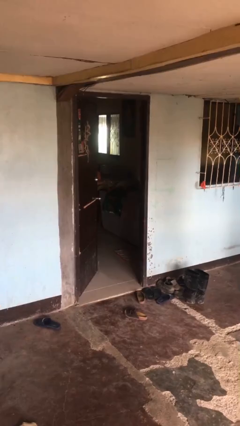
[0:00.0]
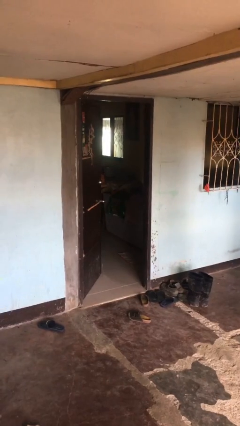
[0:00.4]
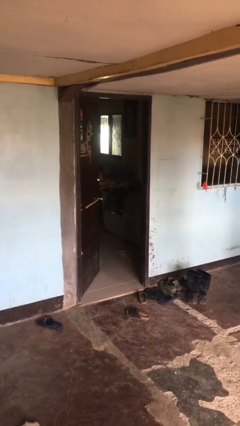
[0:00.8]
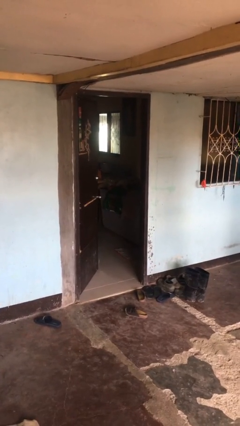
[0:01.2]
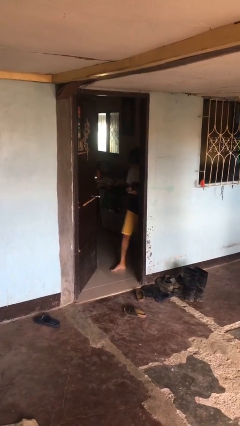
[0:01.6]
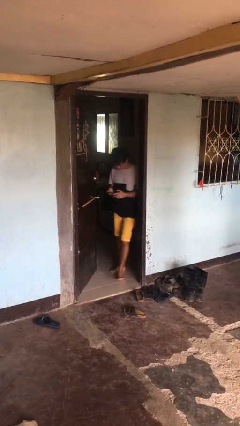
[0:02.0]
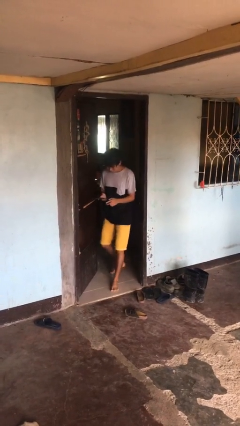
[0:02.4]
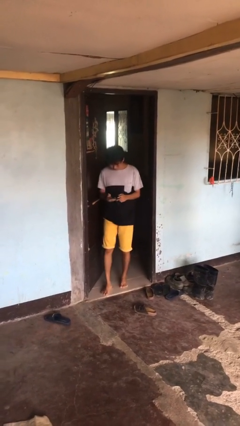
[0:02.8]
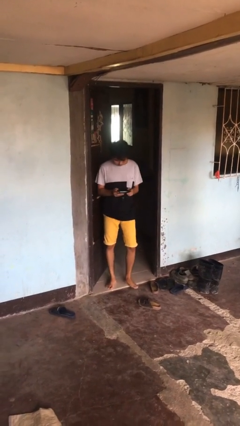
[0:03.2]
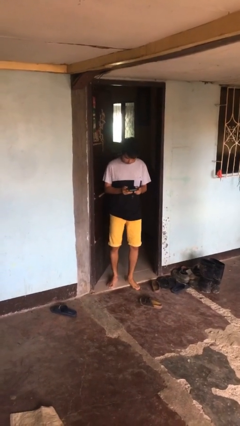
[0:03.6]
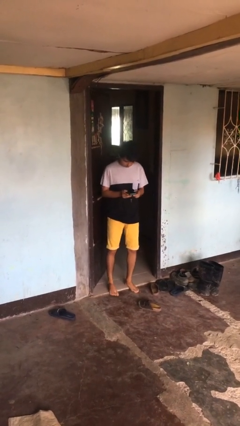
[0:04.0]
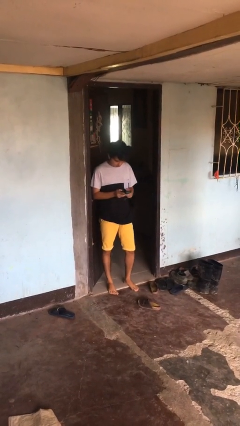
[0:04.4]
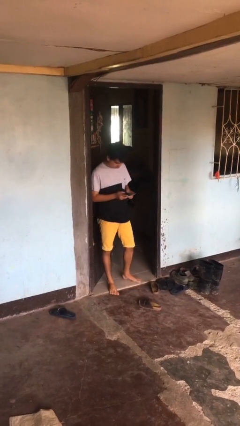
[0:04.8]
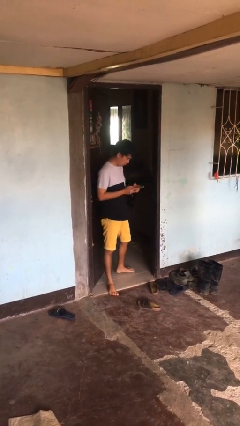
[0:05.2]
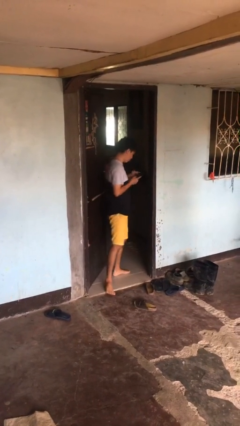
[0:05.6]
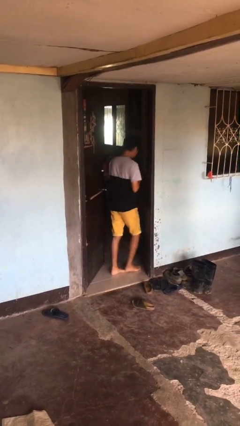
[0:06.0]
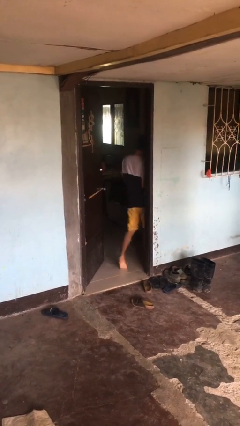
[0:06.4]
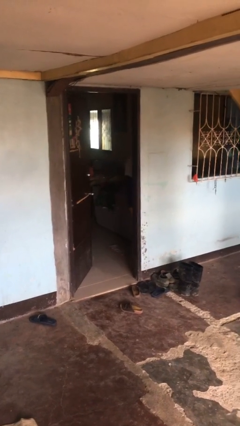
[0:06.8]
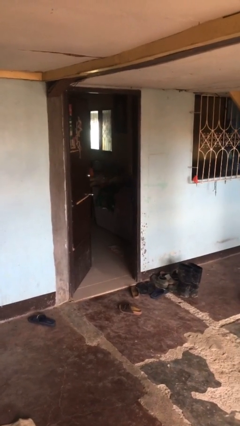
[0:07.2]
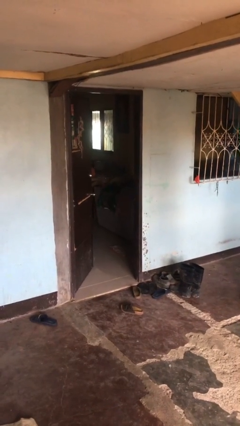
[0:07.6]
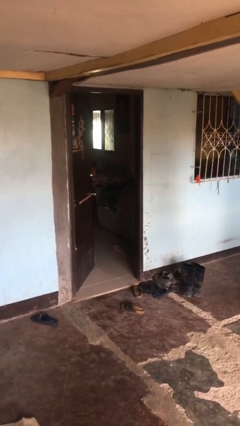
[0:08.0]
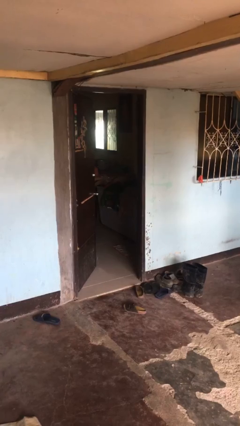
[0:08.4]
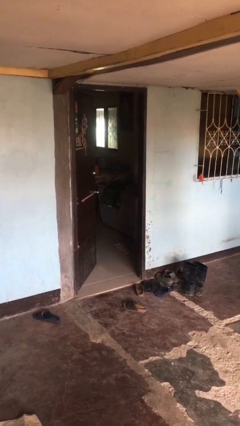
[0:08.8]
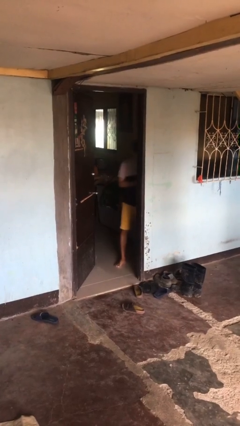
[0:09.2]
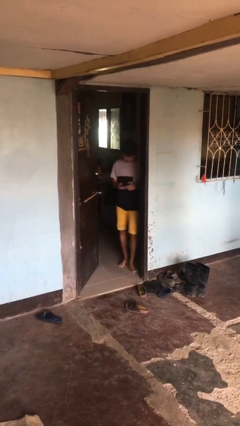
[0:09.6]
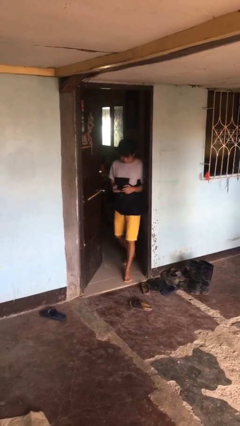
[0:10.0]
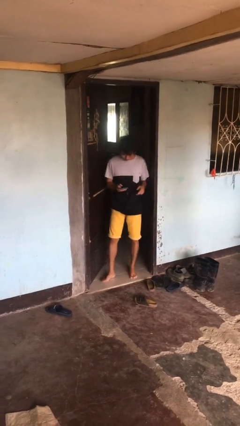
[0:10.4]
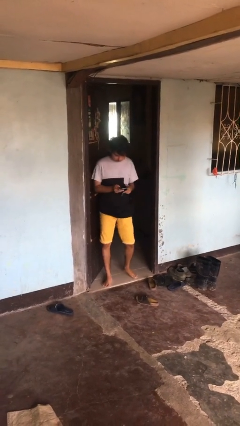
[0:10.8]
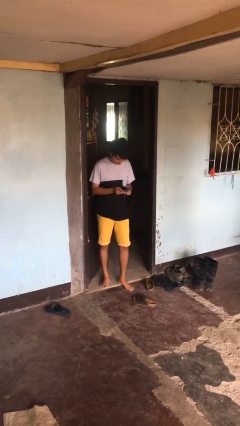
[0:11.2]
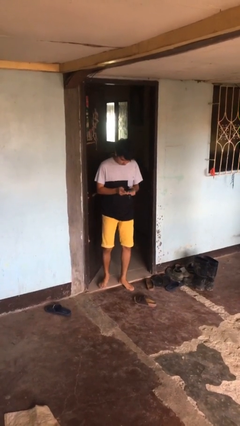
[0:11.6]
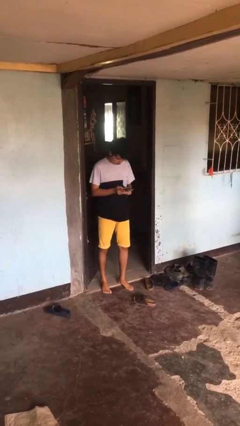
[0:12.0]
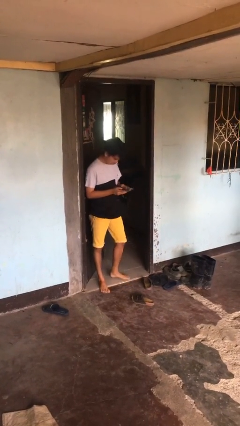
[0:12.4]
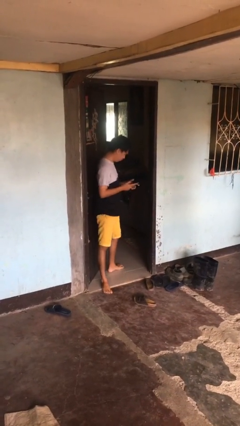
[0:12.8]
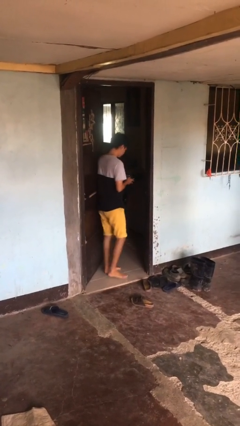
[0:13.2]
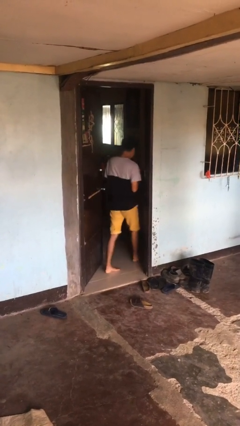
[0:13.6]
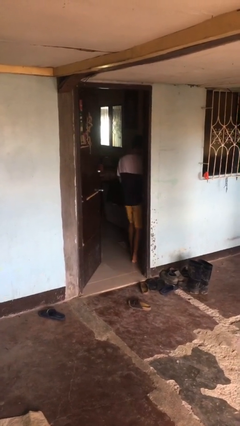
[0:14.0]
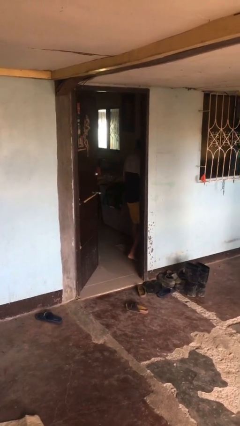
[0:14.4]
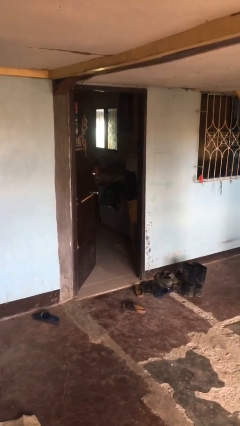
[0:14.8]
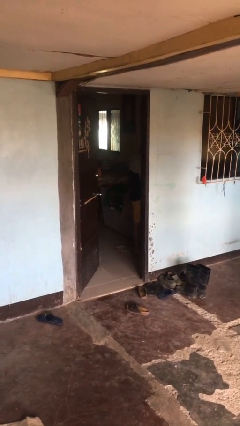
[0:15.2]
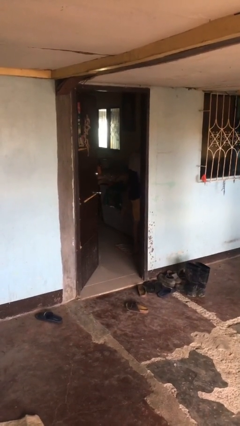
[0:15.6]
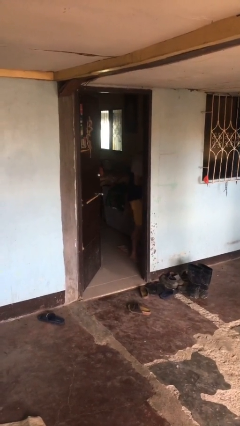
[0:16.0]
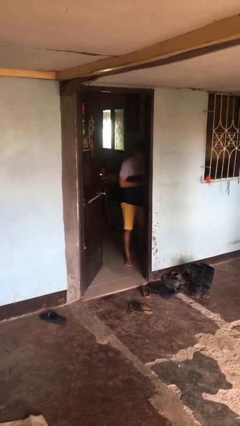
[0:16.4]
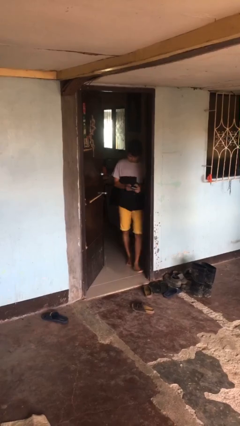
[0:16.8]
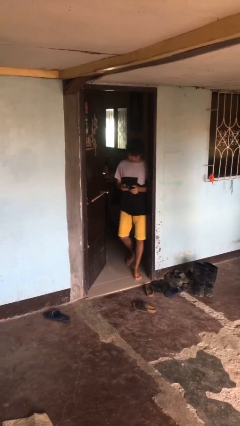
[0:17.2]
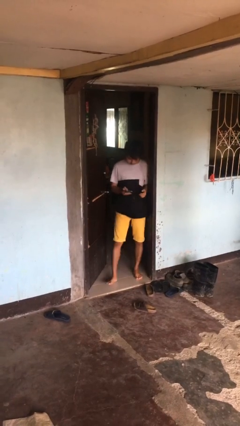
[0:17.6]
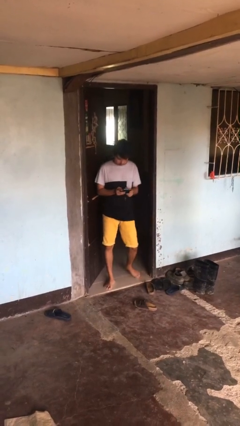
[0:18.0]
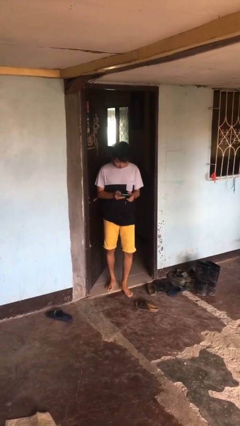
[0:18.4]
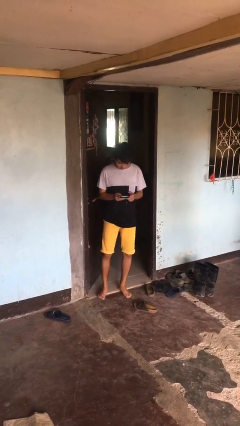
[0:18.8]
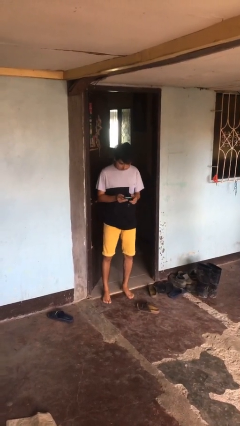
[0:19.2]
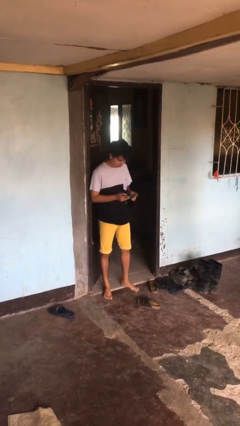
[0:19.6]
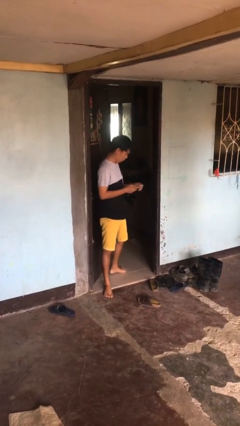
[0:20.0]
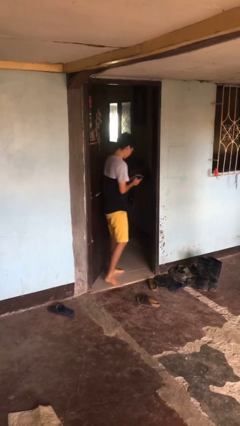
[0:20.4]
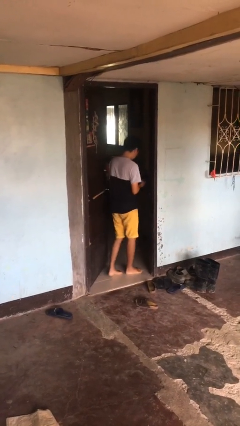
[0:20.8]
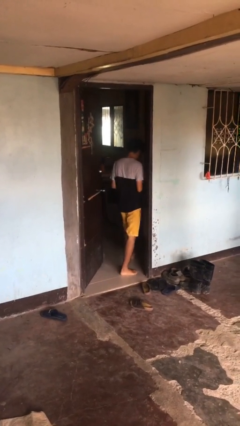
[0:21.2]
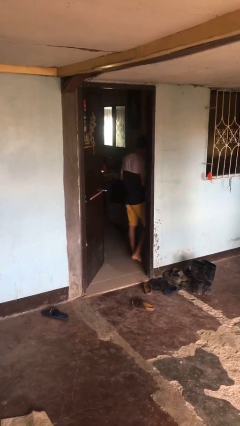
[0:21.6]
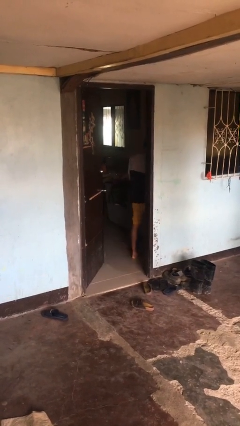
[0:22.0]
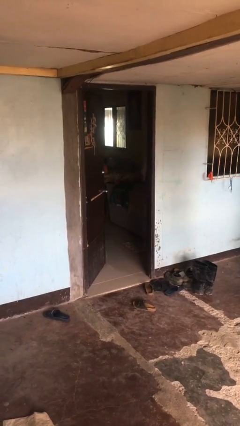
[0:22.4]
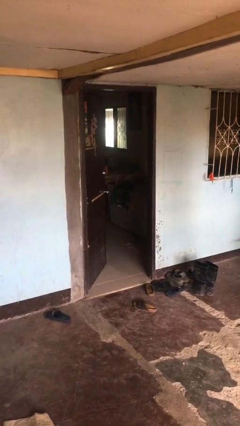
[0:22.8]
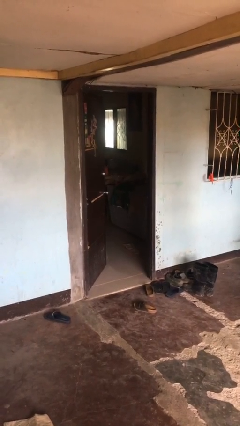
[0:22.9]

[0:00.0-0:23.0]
person texts on phone

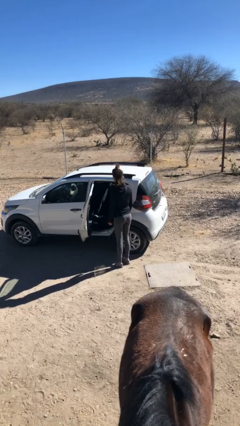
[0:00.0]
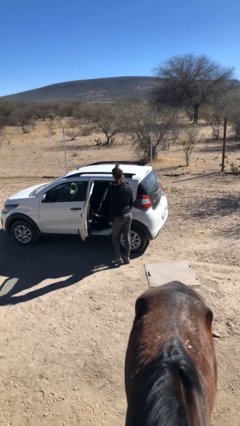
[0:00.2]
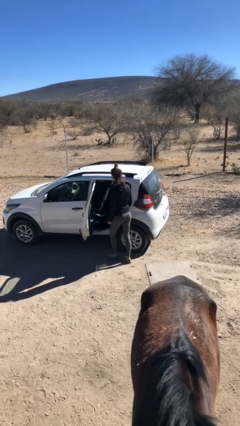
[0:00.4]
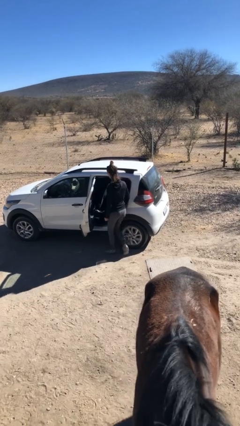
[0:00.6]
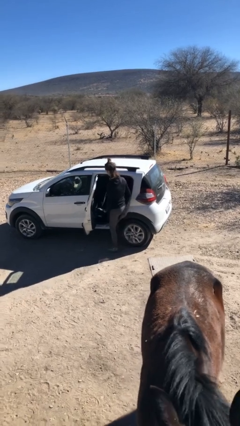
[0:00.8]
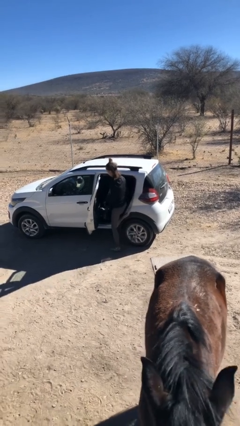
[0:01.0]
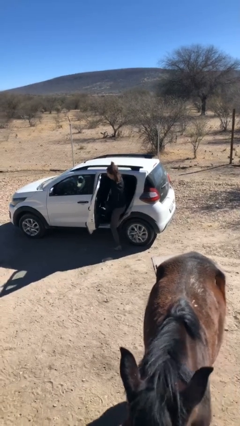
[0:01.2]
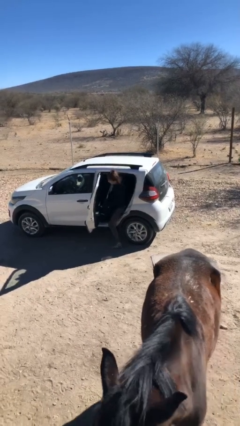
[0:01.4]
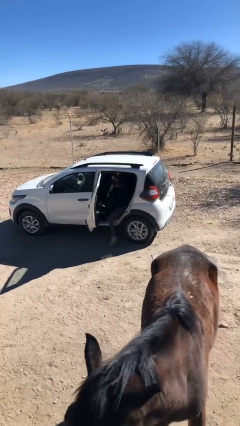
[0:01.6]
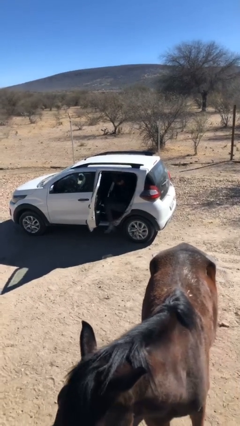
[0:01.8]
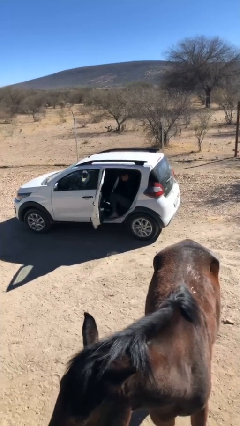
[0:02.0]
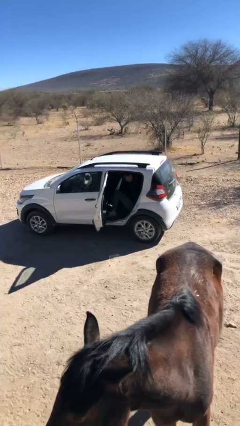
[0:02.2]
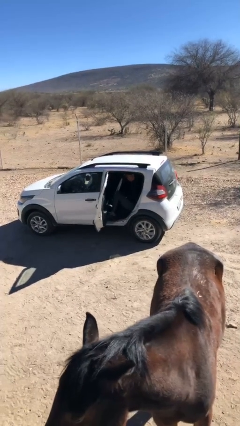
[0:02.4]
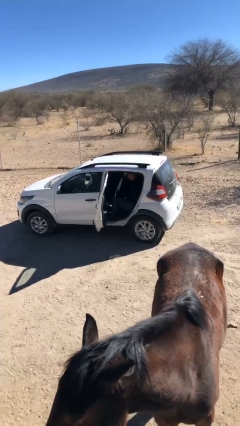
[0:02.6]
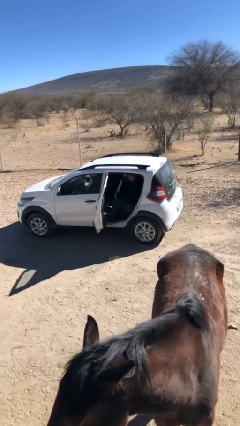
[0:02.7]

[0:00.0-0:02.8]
person enters car

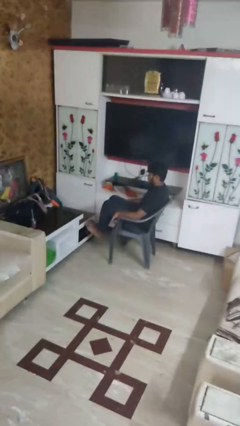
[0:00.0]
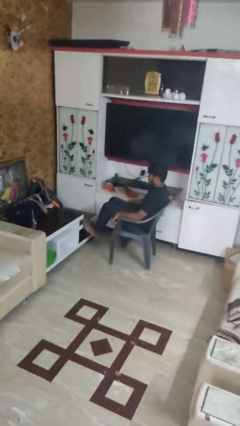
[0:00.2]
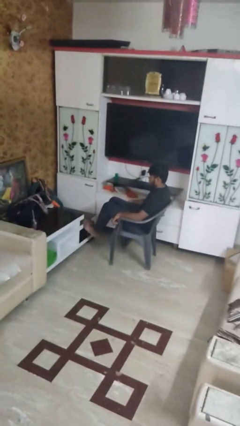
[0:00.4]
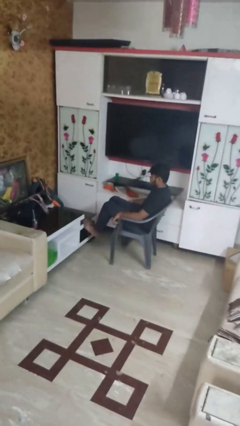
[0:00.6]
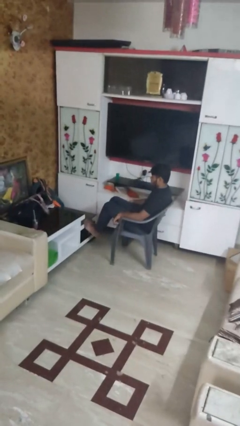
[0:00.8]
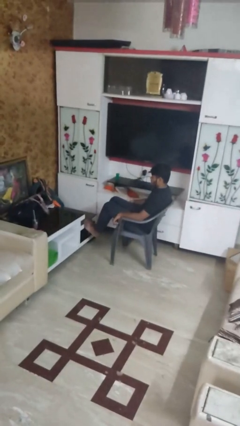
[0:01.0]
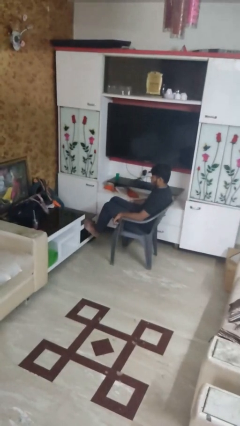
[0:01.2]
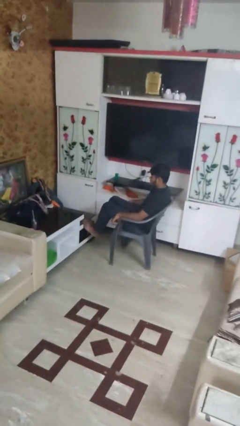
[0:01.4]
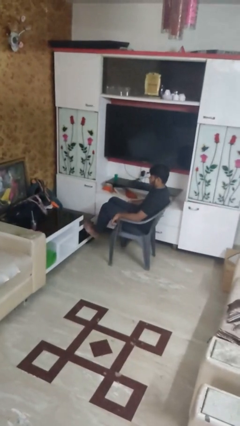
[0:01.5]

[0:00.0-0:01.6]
person puts feet up

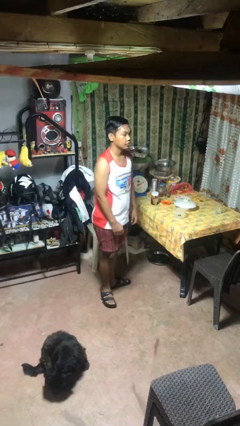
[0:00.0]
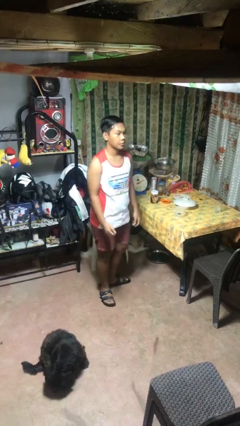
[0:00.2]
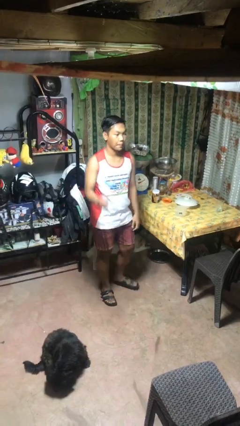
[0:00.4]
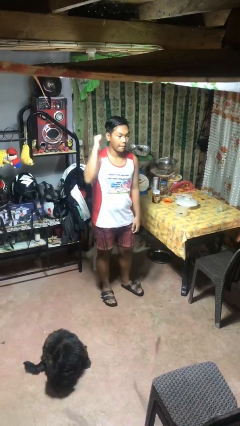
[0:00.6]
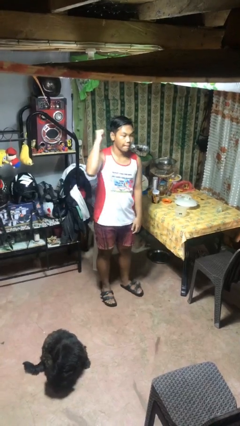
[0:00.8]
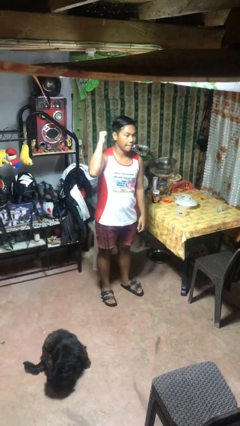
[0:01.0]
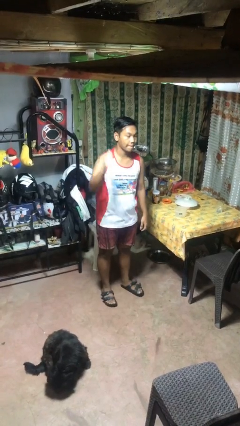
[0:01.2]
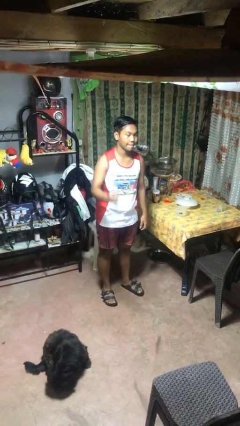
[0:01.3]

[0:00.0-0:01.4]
person gestures behind me

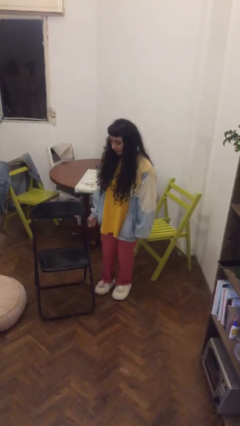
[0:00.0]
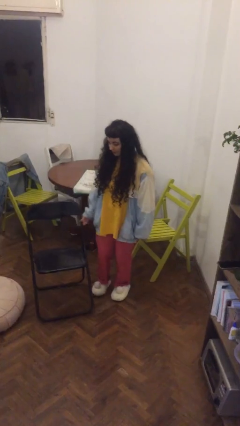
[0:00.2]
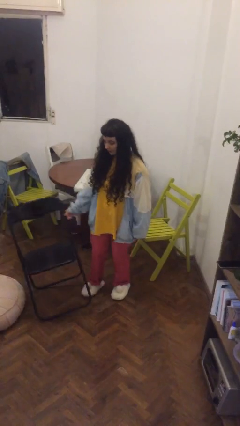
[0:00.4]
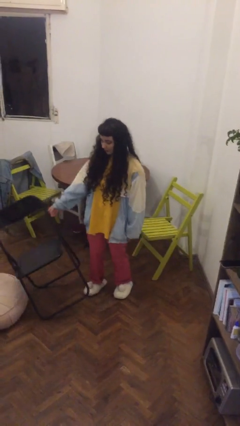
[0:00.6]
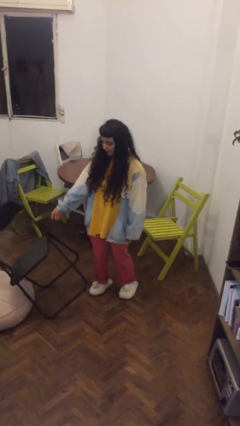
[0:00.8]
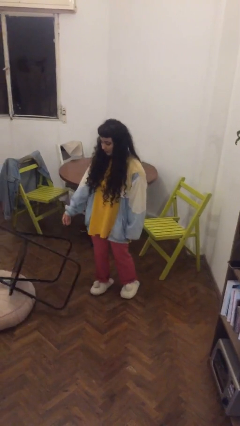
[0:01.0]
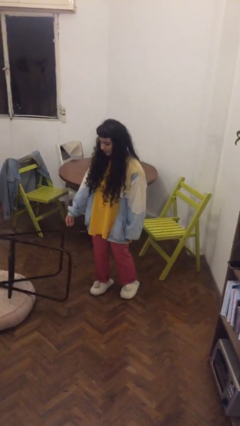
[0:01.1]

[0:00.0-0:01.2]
person knocks over furniture
